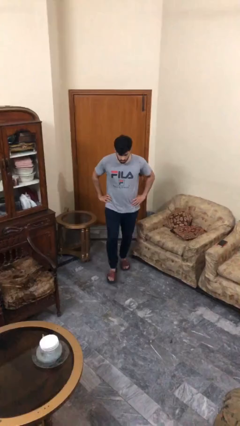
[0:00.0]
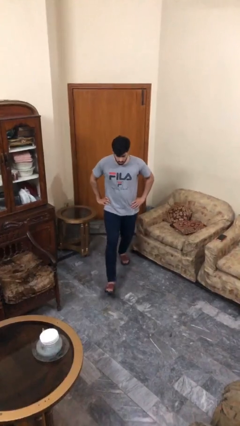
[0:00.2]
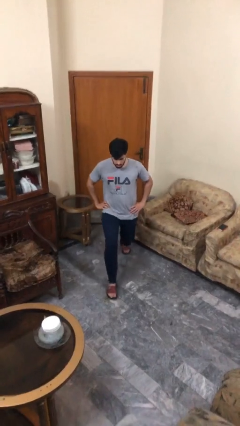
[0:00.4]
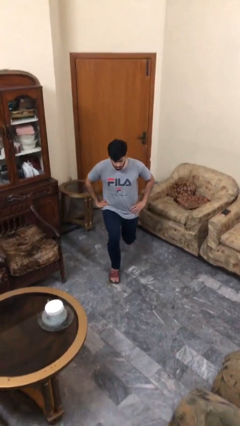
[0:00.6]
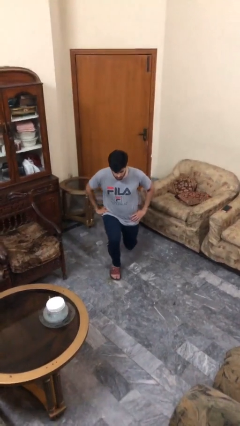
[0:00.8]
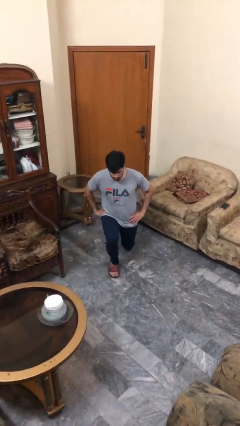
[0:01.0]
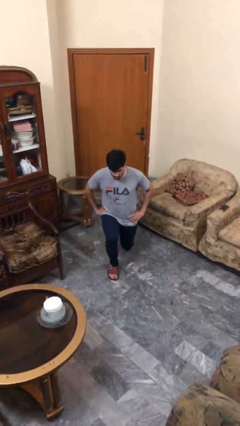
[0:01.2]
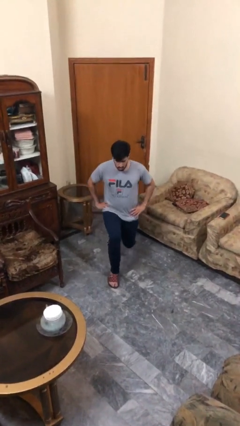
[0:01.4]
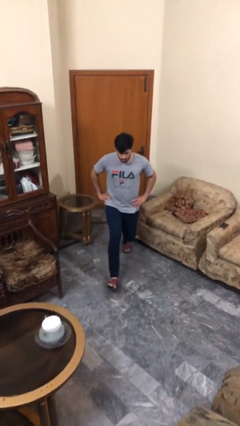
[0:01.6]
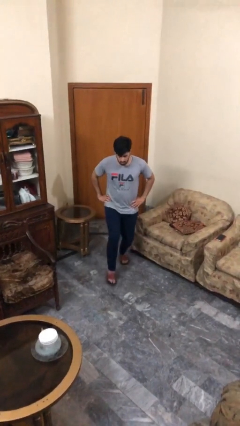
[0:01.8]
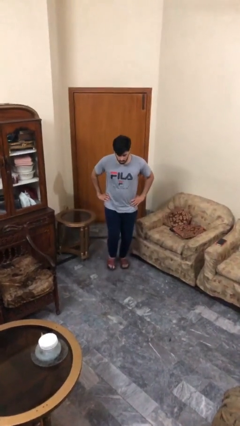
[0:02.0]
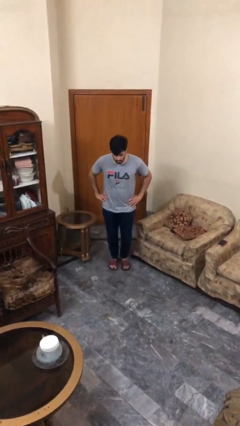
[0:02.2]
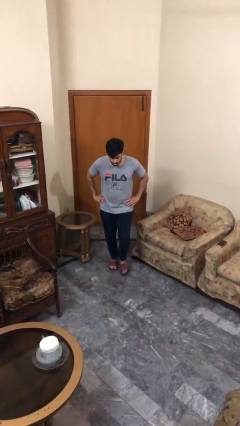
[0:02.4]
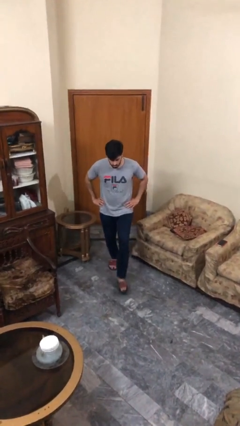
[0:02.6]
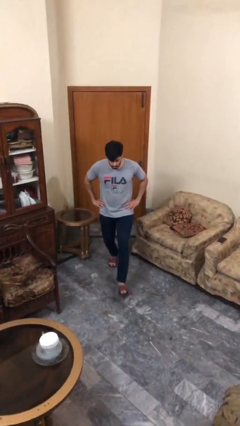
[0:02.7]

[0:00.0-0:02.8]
person exercises with lunges

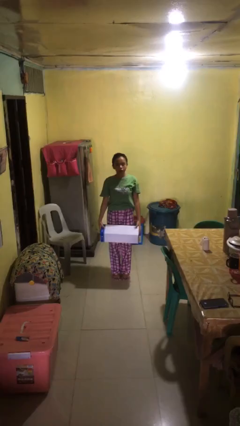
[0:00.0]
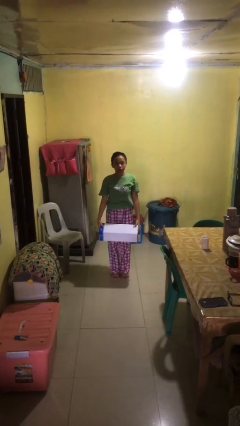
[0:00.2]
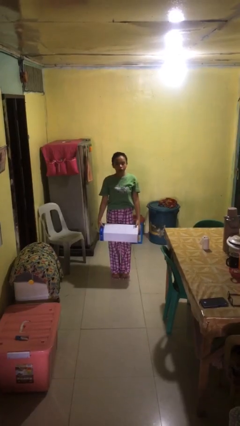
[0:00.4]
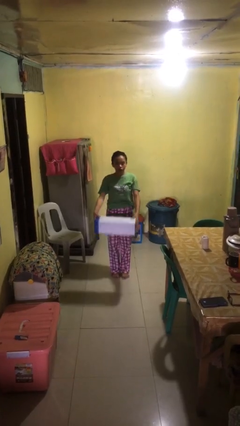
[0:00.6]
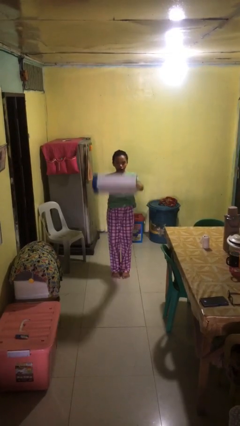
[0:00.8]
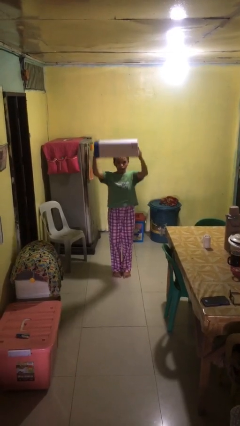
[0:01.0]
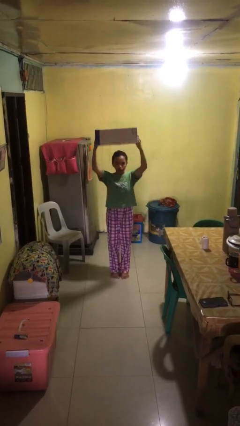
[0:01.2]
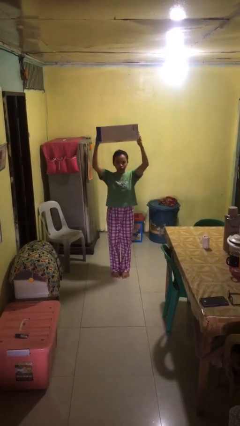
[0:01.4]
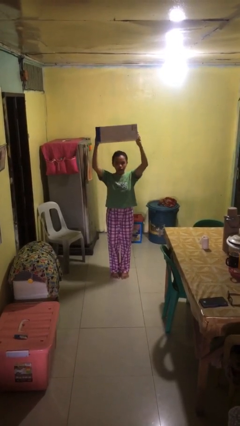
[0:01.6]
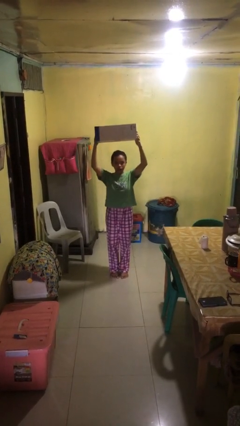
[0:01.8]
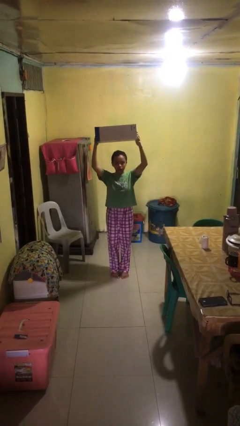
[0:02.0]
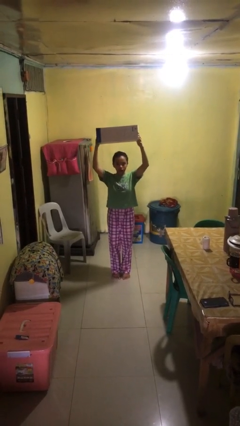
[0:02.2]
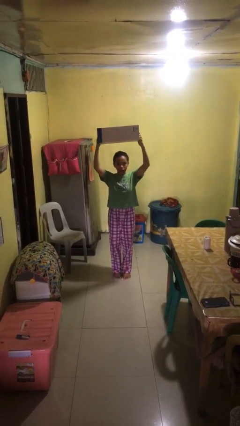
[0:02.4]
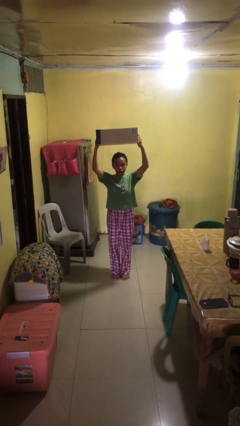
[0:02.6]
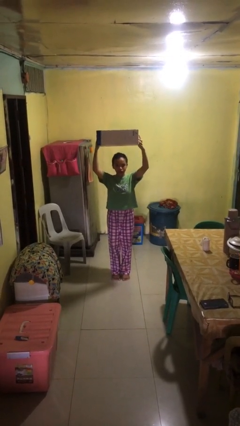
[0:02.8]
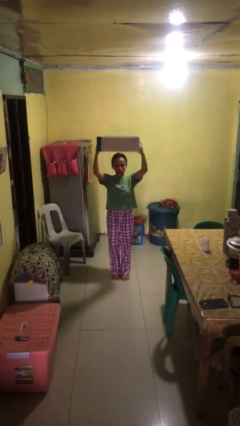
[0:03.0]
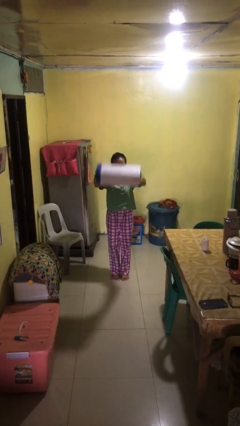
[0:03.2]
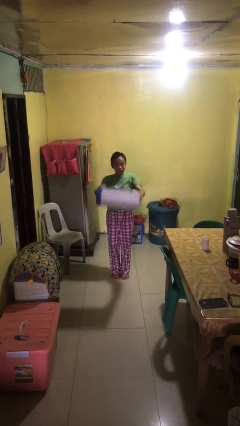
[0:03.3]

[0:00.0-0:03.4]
person holds object above head

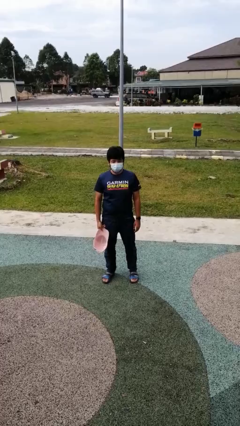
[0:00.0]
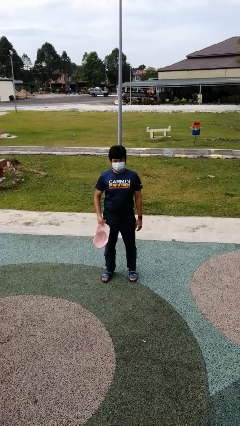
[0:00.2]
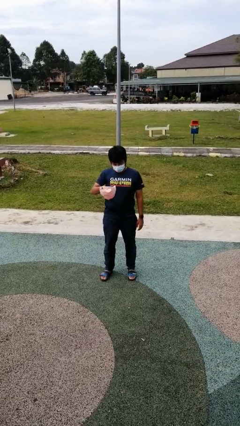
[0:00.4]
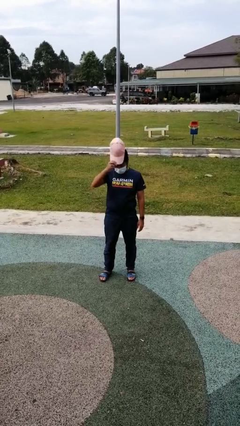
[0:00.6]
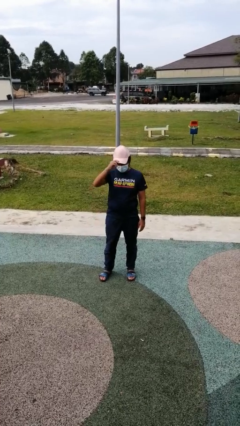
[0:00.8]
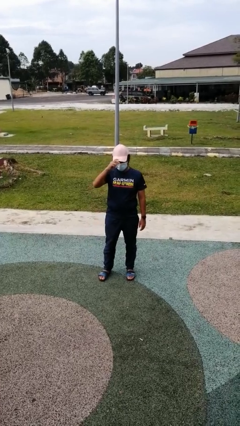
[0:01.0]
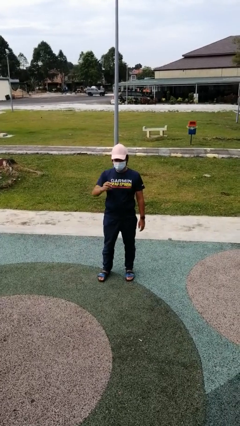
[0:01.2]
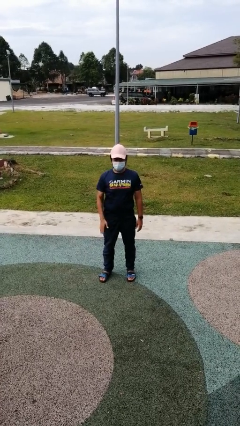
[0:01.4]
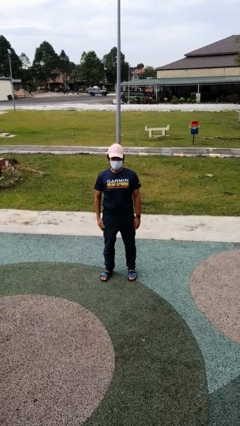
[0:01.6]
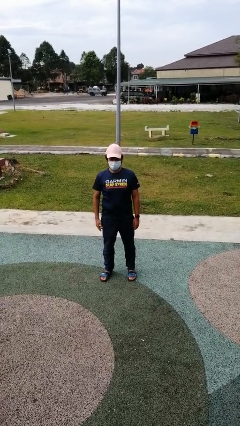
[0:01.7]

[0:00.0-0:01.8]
person puts on hat

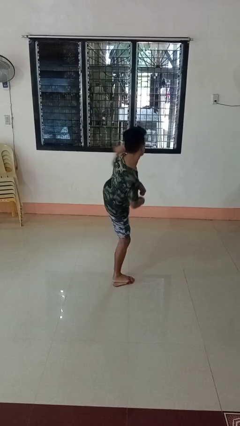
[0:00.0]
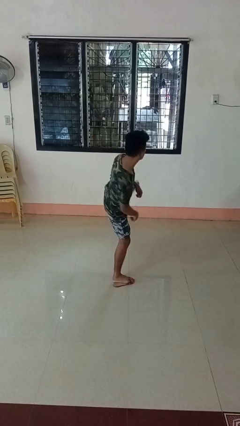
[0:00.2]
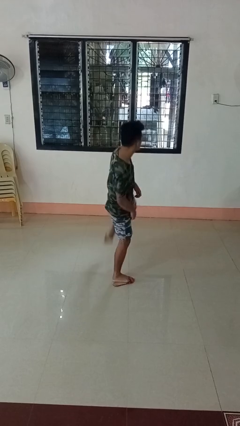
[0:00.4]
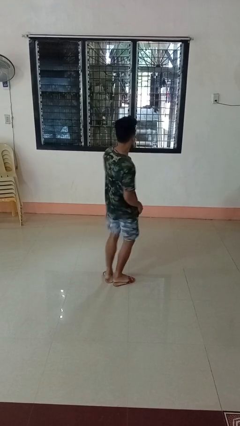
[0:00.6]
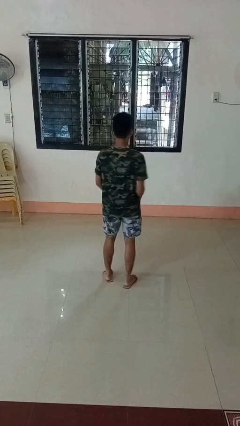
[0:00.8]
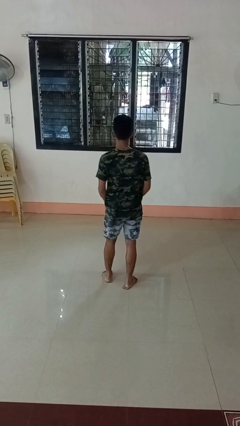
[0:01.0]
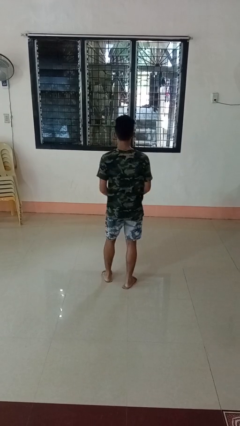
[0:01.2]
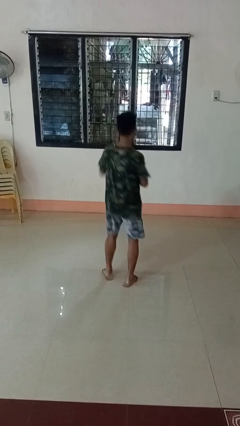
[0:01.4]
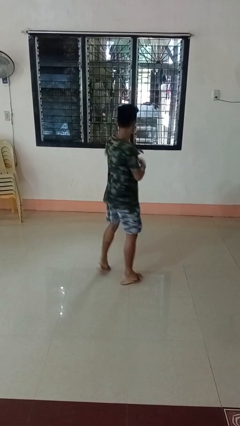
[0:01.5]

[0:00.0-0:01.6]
person karate kicks

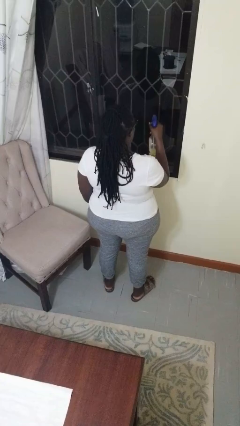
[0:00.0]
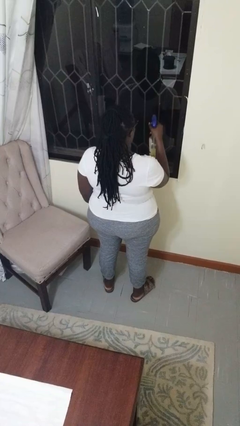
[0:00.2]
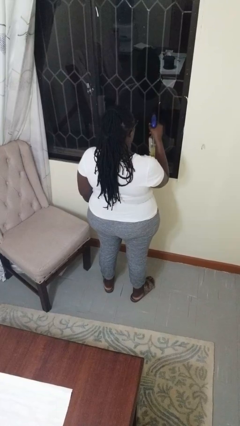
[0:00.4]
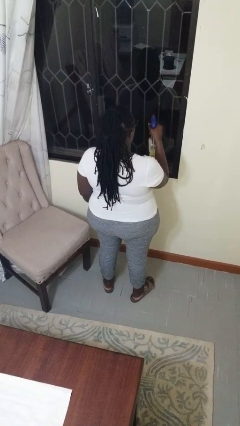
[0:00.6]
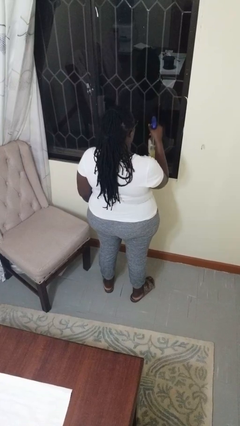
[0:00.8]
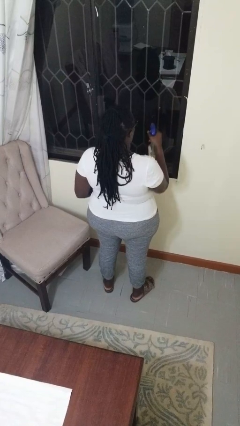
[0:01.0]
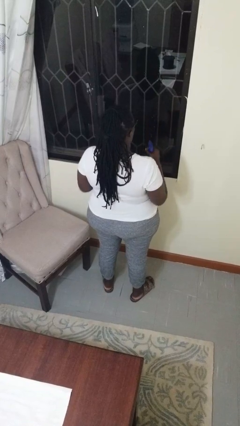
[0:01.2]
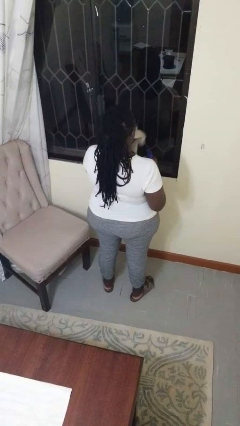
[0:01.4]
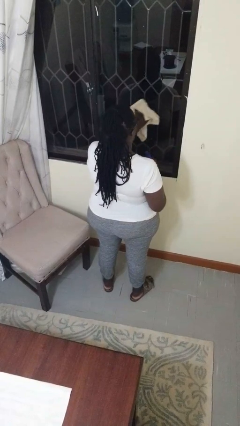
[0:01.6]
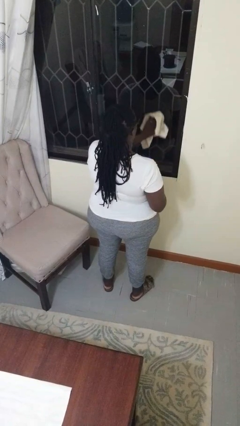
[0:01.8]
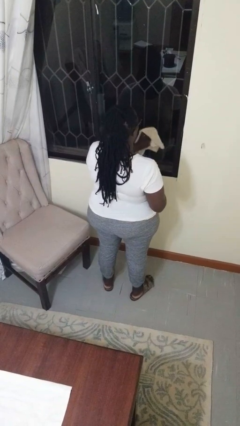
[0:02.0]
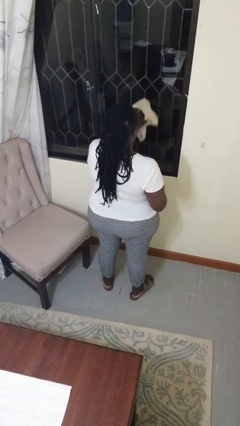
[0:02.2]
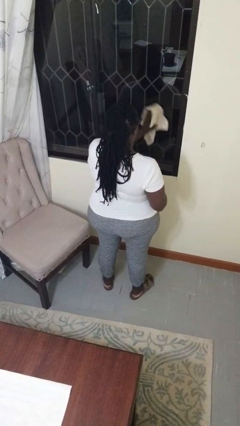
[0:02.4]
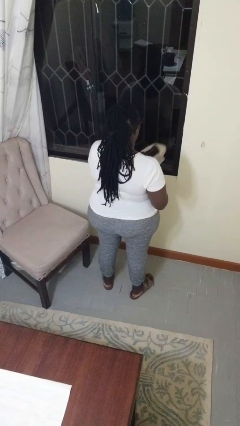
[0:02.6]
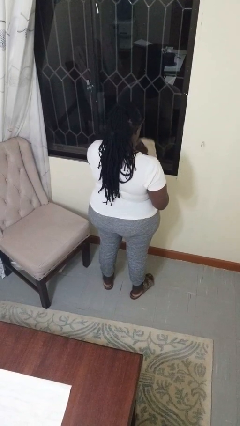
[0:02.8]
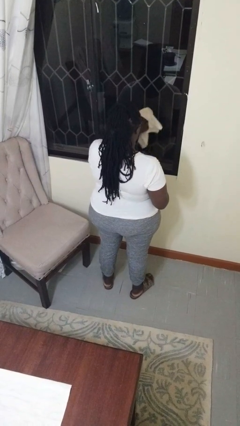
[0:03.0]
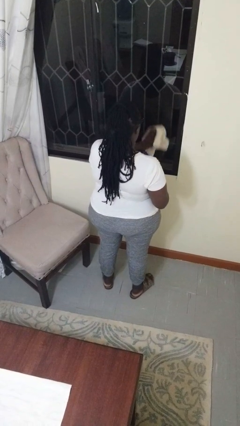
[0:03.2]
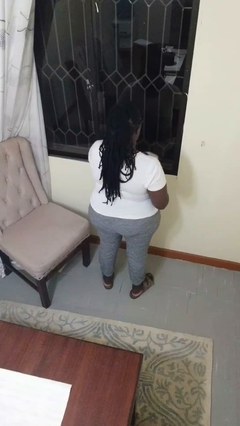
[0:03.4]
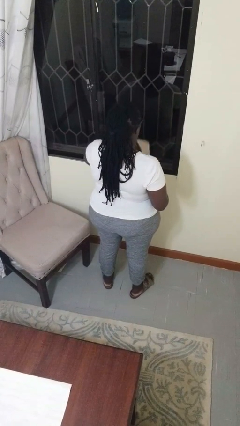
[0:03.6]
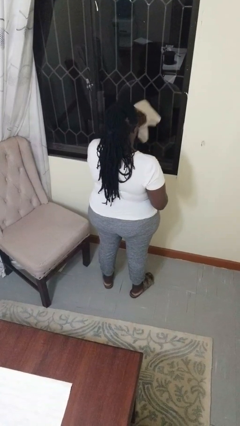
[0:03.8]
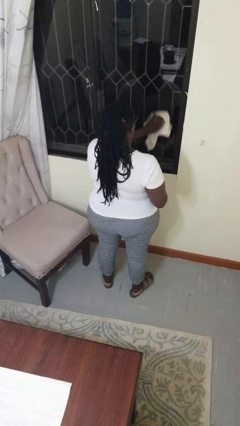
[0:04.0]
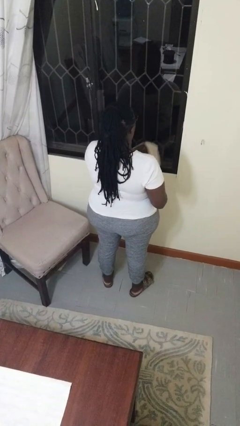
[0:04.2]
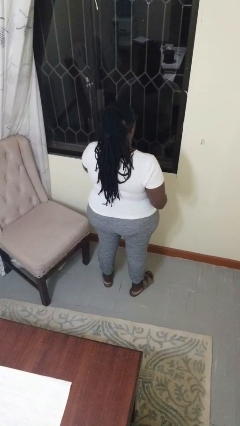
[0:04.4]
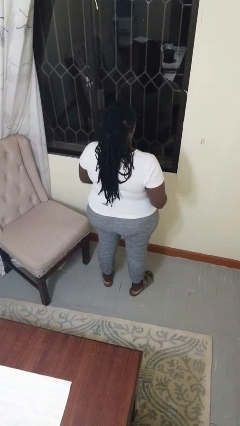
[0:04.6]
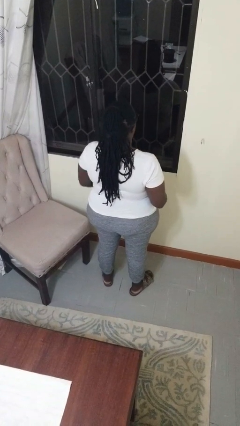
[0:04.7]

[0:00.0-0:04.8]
person washes window

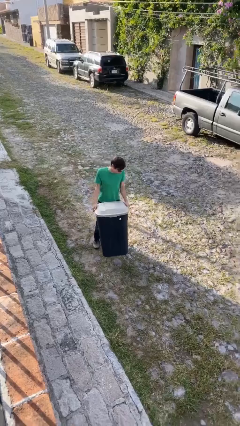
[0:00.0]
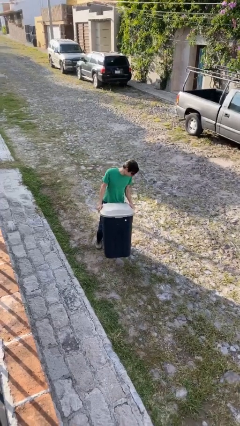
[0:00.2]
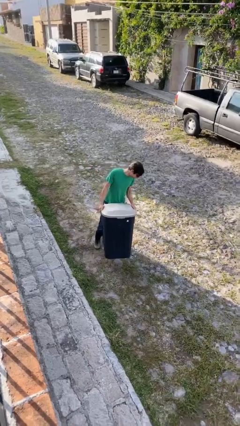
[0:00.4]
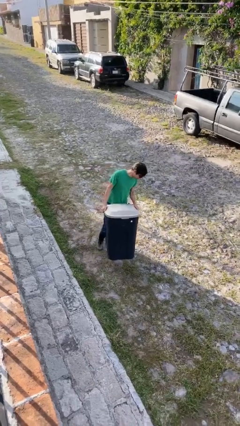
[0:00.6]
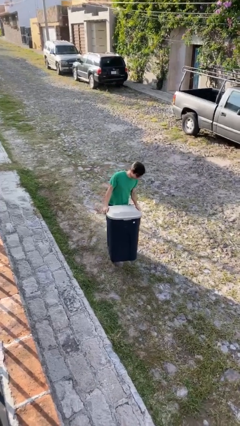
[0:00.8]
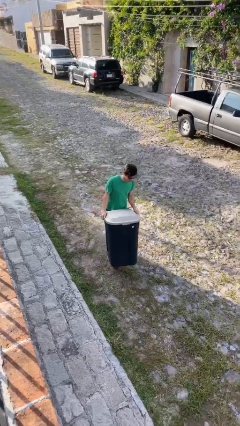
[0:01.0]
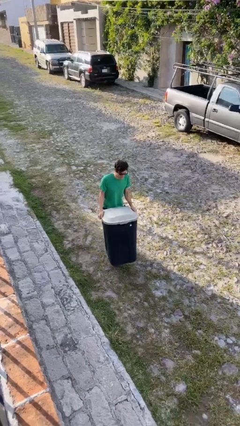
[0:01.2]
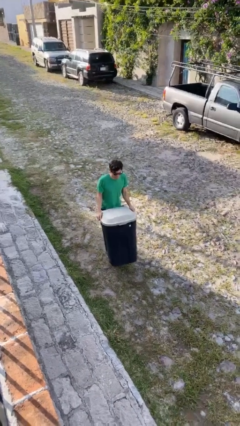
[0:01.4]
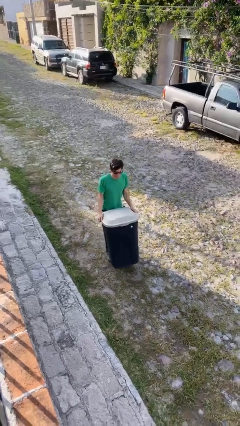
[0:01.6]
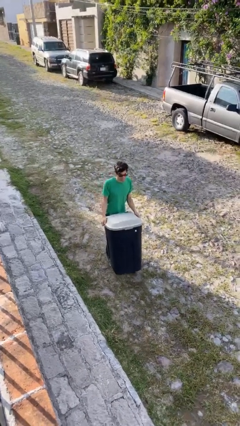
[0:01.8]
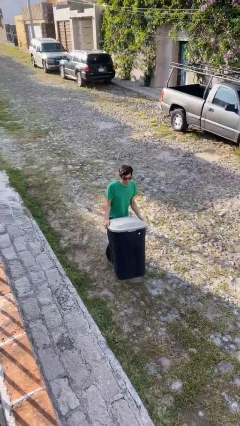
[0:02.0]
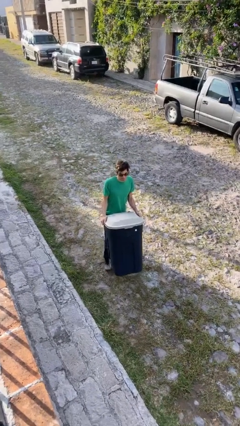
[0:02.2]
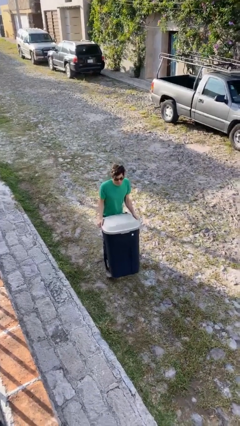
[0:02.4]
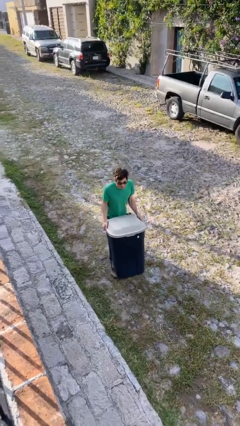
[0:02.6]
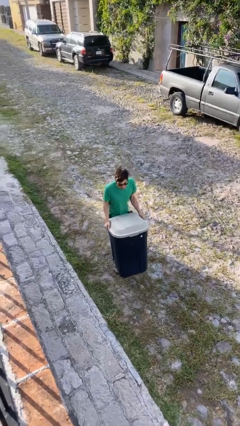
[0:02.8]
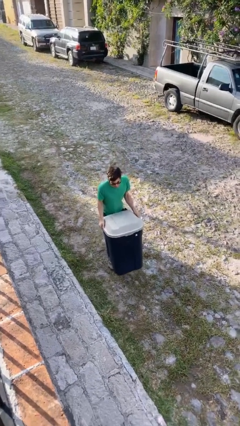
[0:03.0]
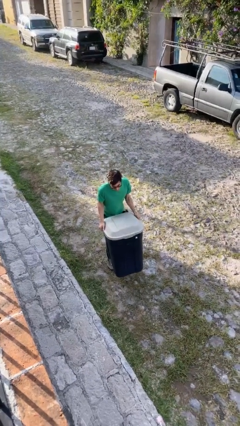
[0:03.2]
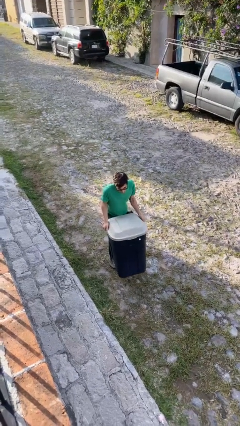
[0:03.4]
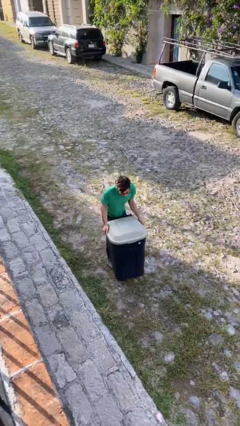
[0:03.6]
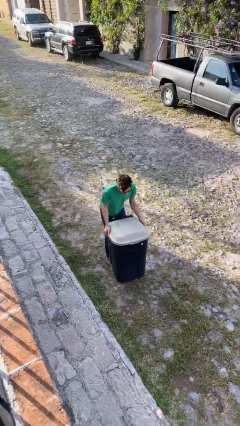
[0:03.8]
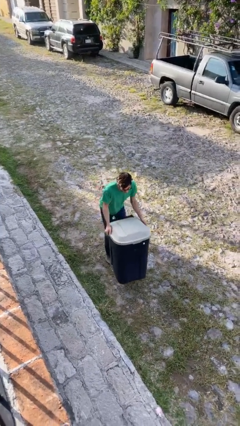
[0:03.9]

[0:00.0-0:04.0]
person carries heavy object
